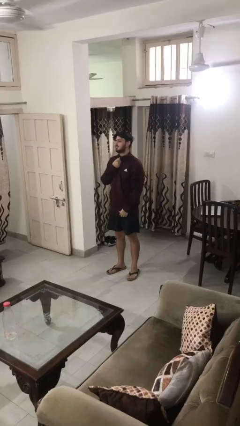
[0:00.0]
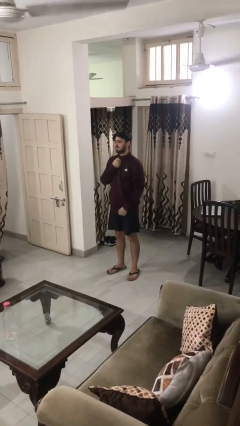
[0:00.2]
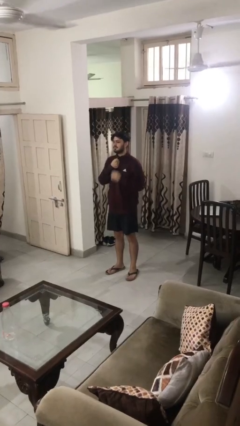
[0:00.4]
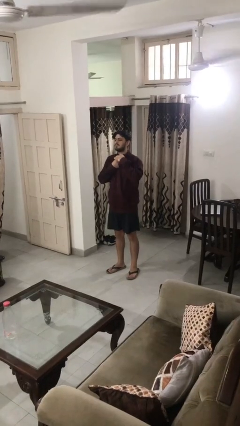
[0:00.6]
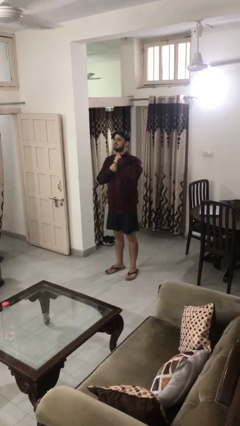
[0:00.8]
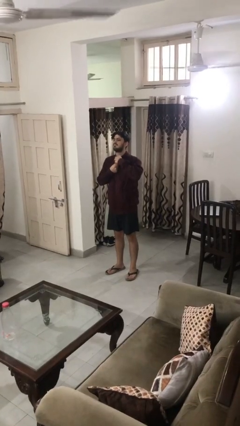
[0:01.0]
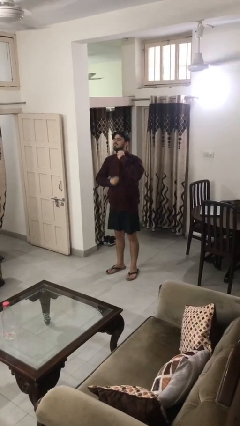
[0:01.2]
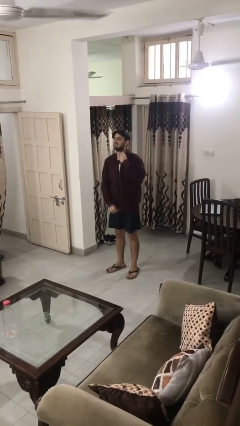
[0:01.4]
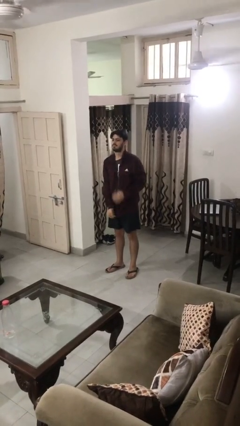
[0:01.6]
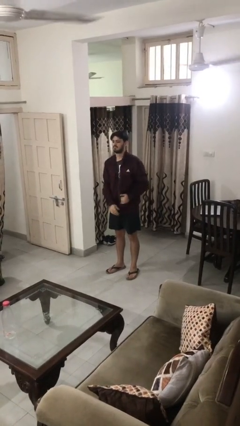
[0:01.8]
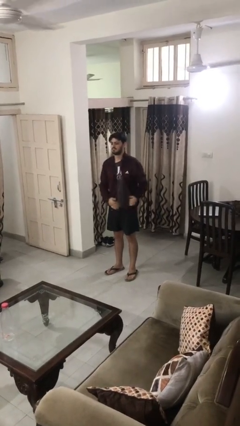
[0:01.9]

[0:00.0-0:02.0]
person unzips jacket

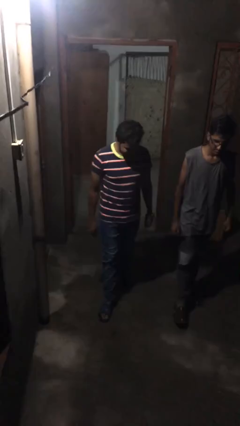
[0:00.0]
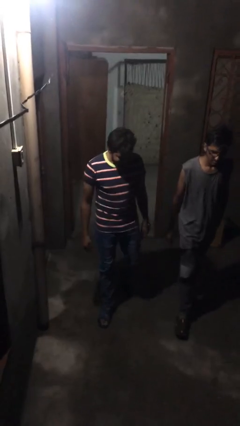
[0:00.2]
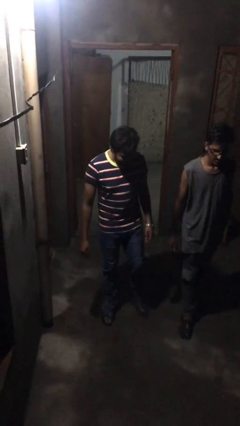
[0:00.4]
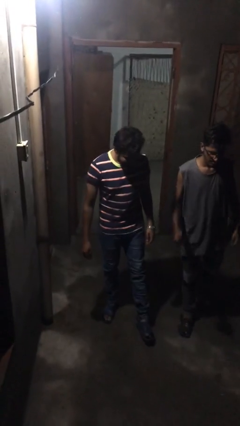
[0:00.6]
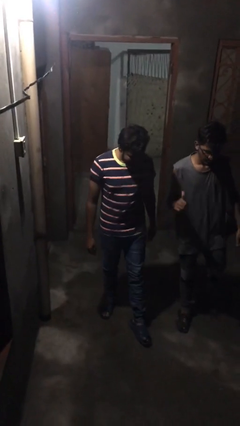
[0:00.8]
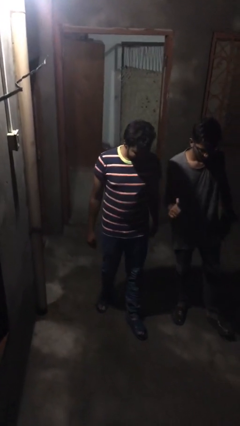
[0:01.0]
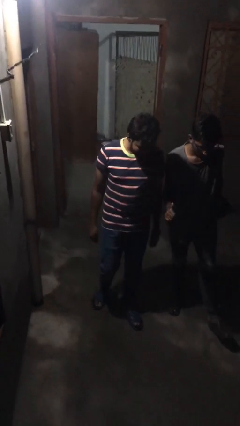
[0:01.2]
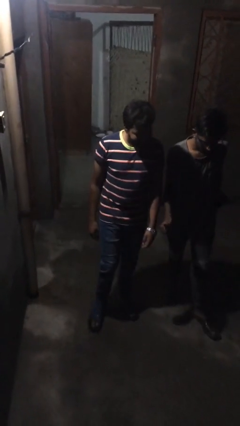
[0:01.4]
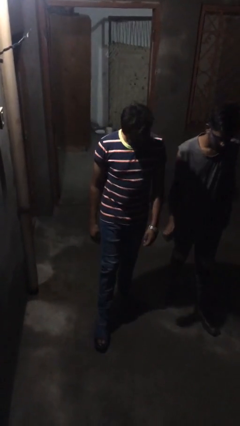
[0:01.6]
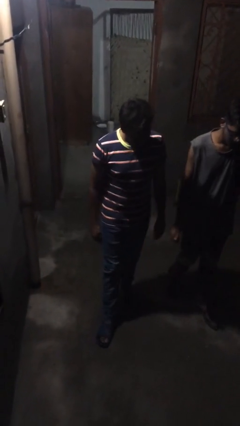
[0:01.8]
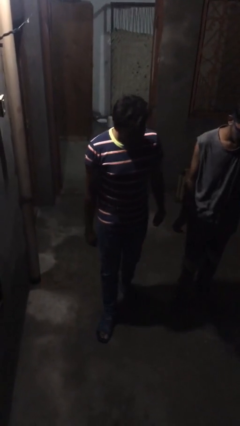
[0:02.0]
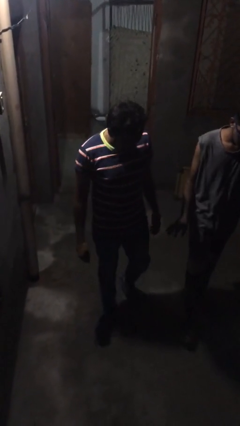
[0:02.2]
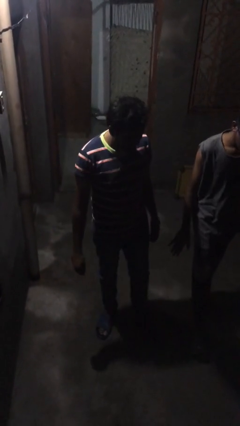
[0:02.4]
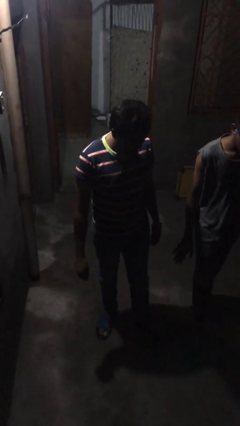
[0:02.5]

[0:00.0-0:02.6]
person talks to person

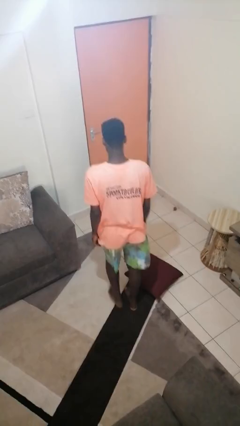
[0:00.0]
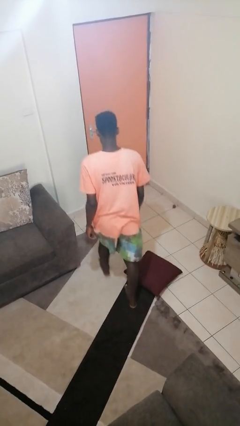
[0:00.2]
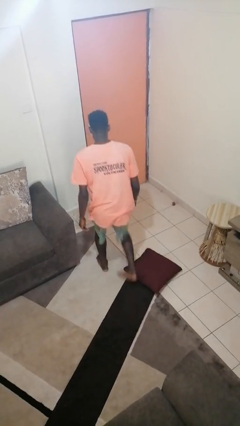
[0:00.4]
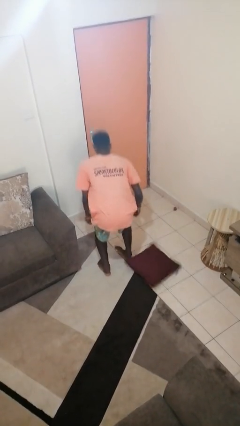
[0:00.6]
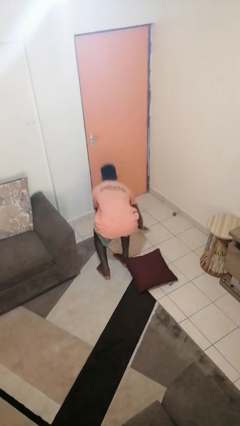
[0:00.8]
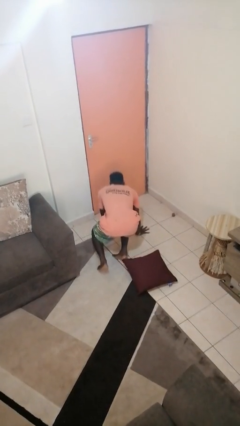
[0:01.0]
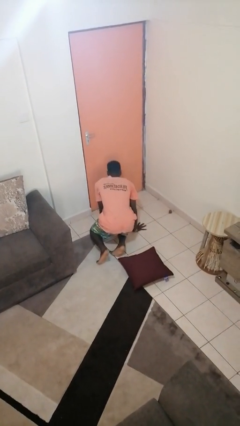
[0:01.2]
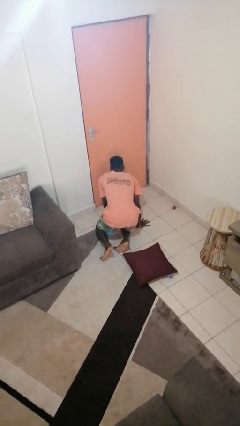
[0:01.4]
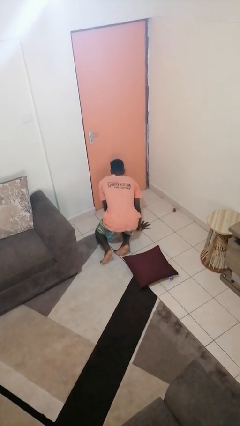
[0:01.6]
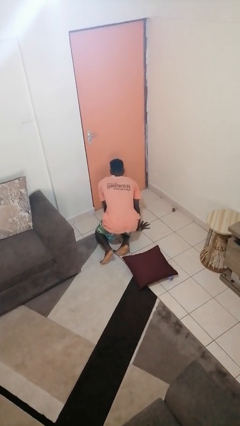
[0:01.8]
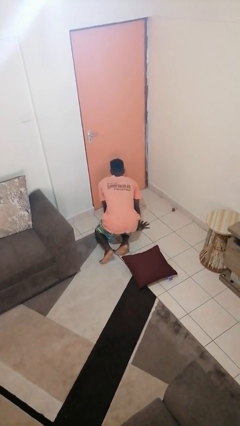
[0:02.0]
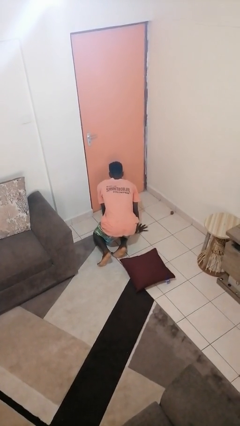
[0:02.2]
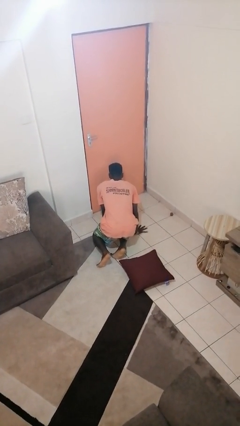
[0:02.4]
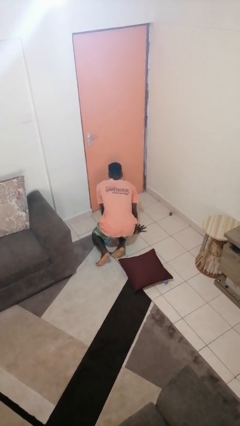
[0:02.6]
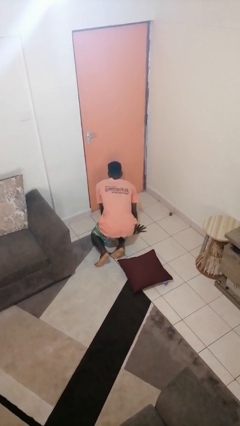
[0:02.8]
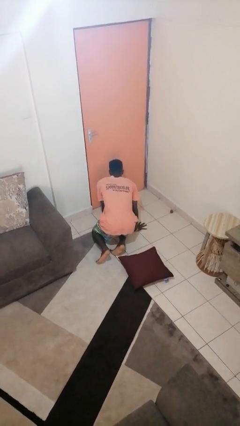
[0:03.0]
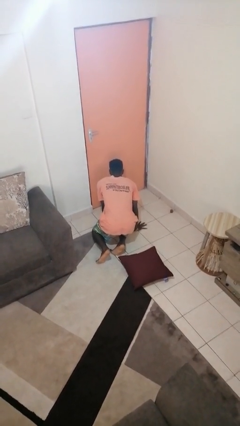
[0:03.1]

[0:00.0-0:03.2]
person trips on object on floor

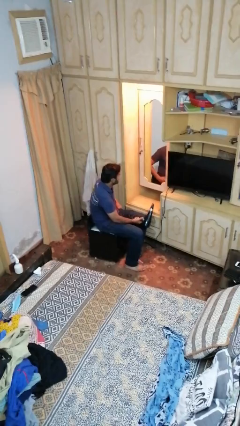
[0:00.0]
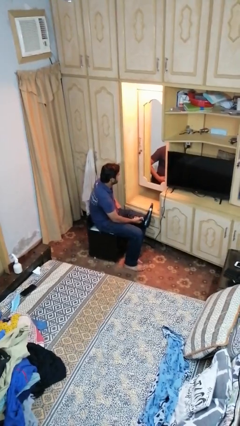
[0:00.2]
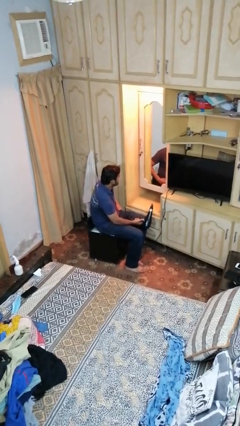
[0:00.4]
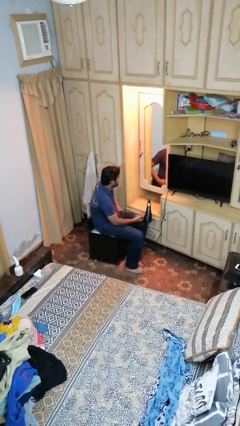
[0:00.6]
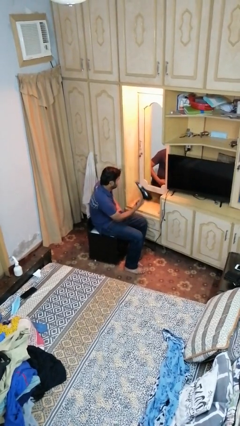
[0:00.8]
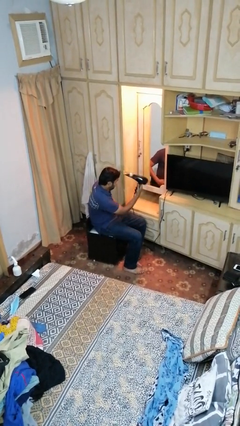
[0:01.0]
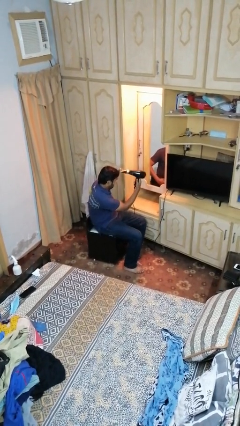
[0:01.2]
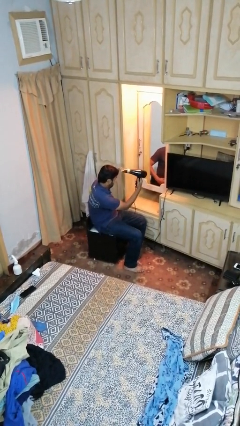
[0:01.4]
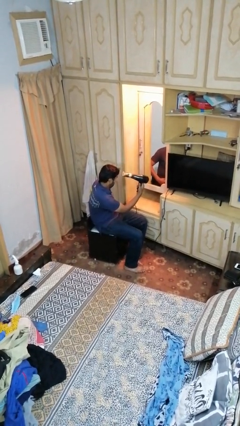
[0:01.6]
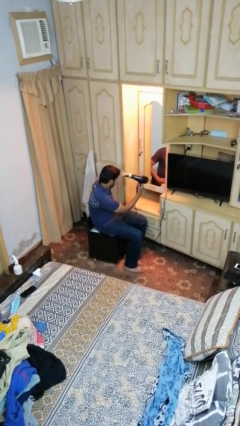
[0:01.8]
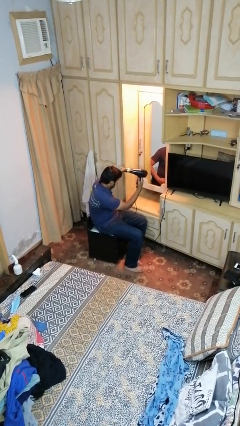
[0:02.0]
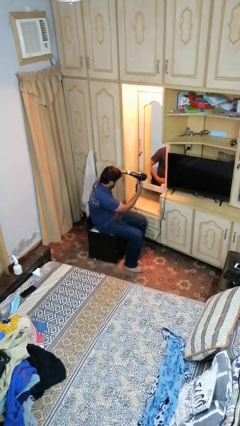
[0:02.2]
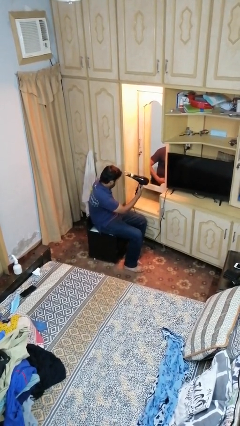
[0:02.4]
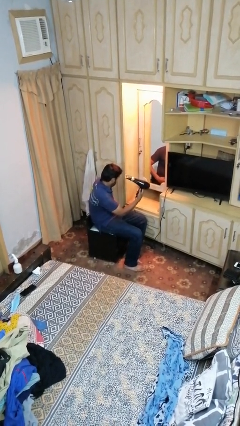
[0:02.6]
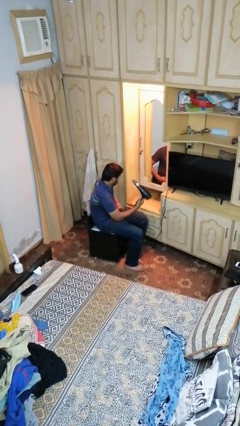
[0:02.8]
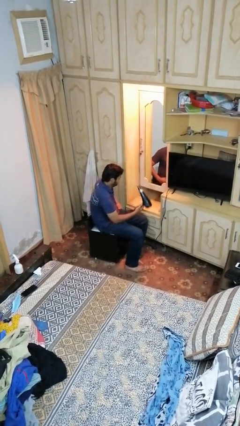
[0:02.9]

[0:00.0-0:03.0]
person dries hair with hairdryer

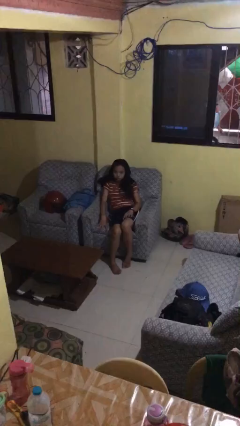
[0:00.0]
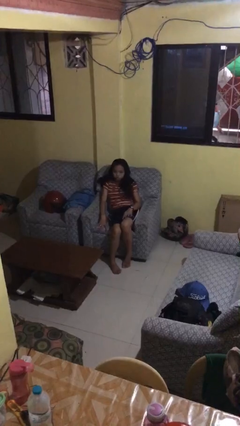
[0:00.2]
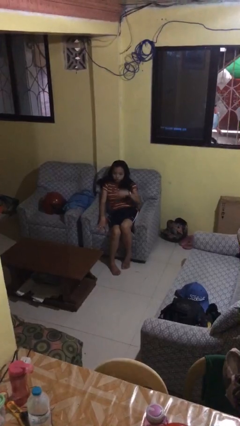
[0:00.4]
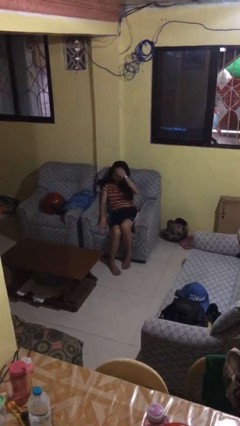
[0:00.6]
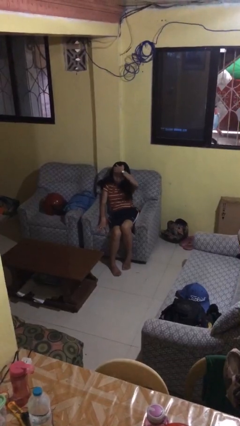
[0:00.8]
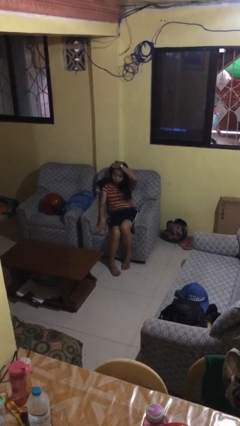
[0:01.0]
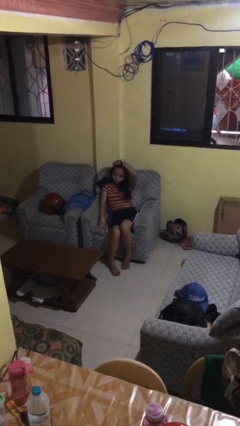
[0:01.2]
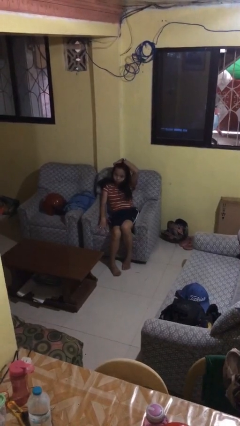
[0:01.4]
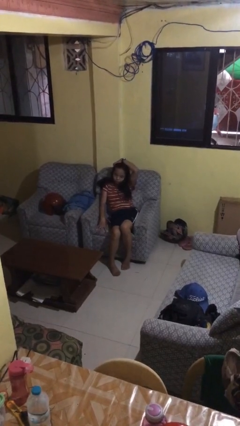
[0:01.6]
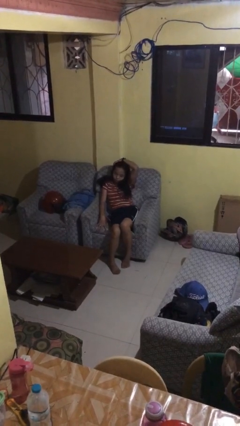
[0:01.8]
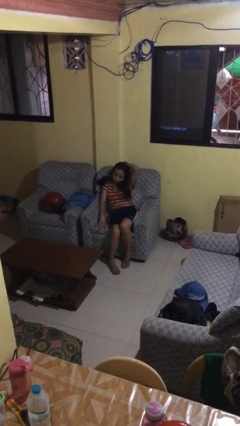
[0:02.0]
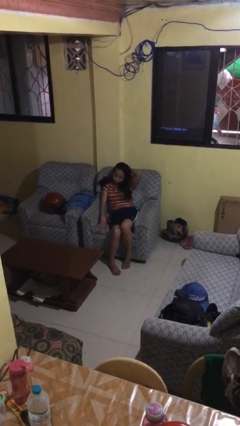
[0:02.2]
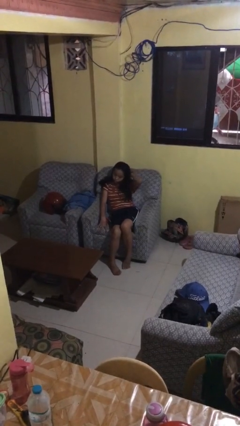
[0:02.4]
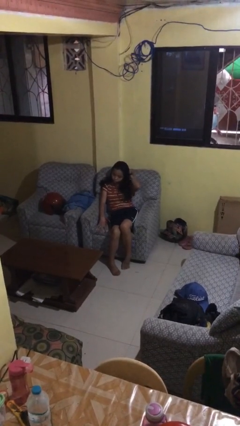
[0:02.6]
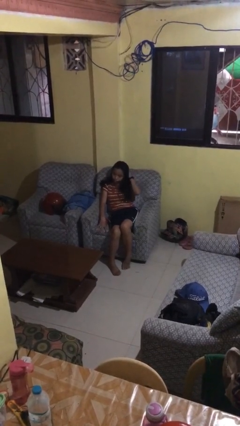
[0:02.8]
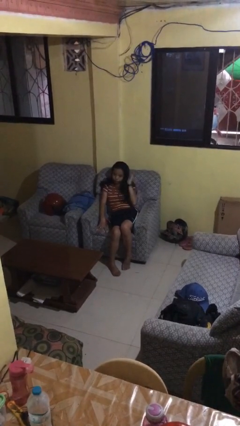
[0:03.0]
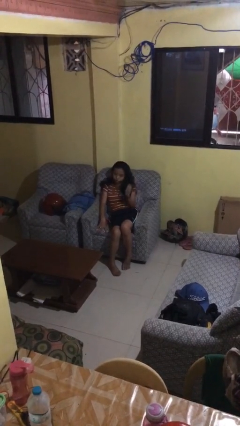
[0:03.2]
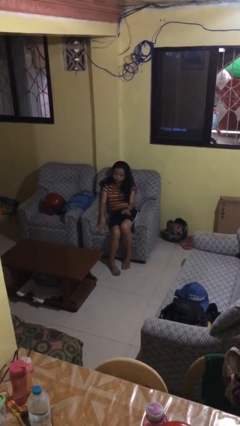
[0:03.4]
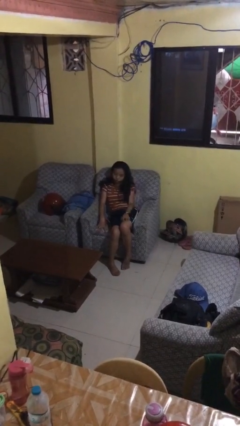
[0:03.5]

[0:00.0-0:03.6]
person strokes hair

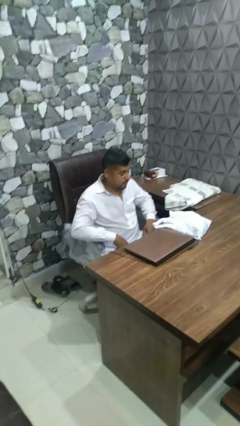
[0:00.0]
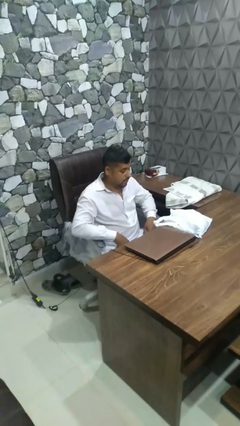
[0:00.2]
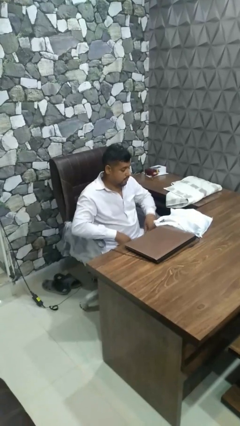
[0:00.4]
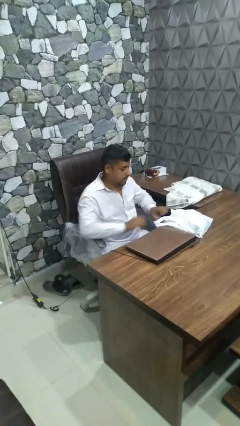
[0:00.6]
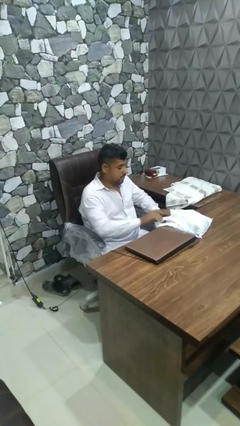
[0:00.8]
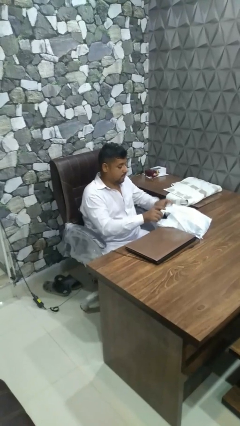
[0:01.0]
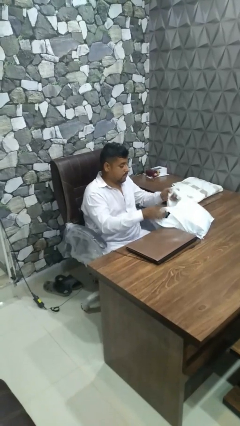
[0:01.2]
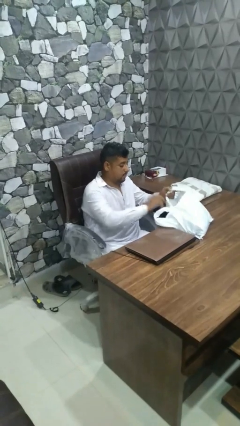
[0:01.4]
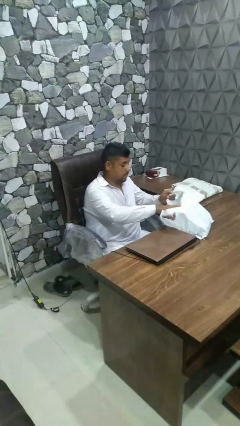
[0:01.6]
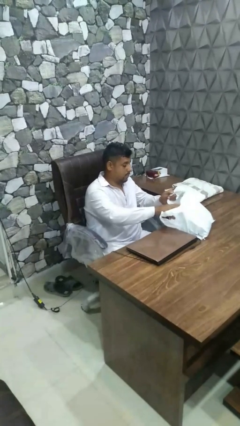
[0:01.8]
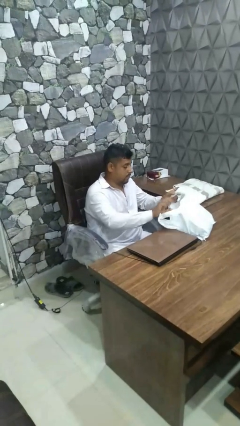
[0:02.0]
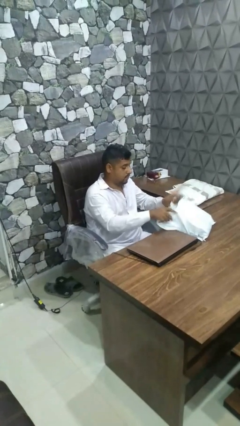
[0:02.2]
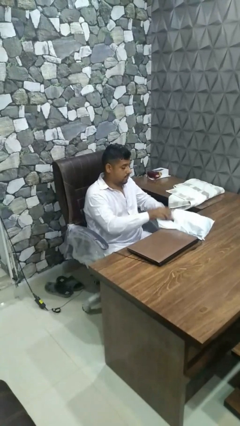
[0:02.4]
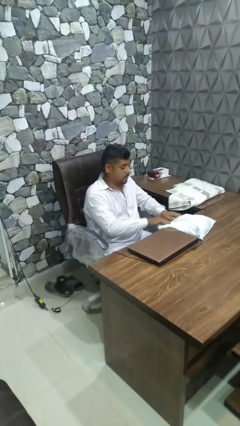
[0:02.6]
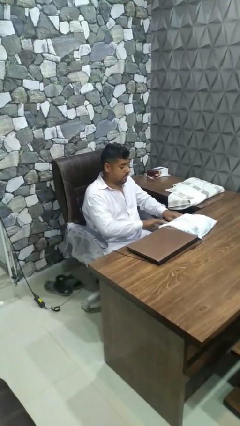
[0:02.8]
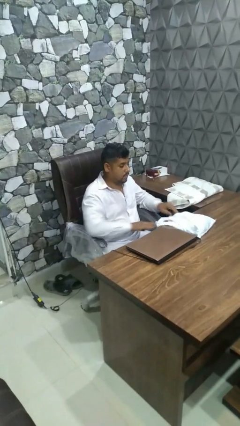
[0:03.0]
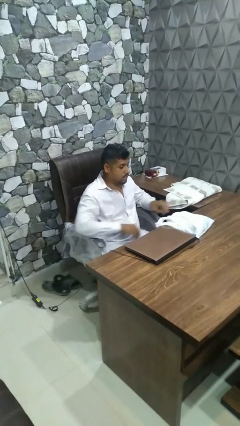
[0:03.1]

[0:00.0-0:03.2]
person searches in bag
